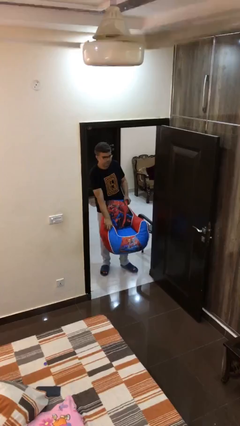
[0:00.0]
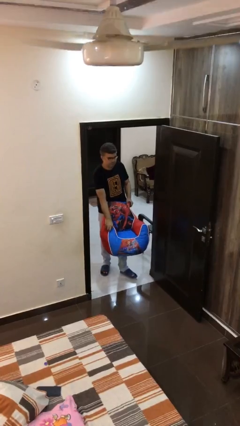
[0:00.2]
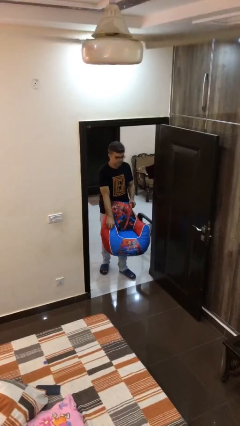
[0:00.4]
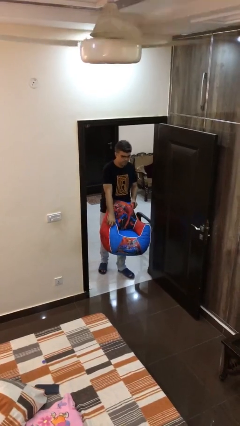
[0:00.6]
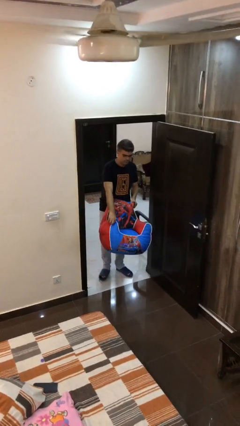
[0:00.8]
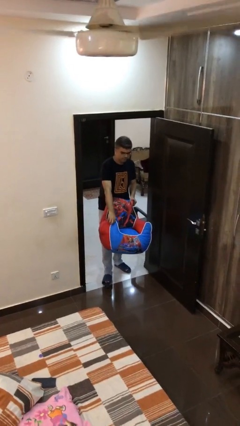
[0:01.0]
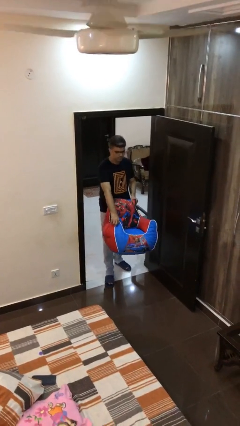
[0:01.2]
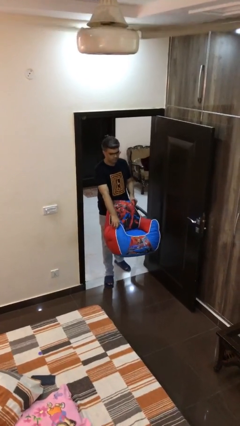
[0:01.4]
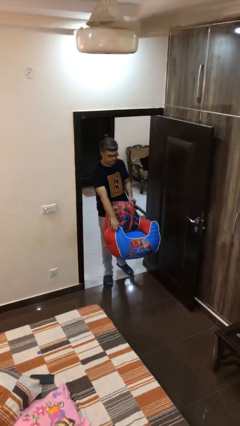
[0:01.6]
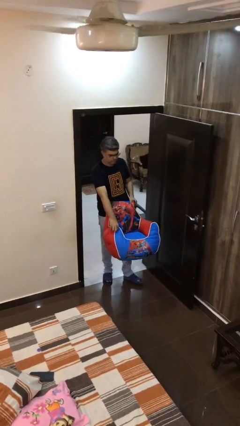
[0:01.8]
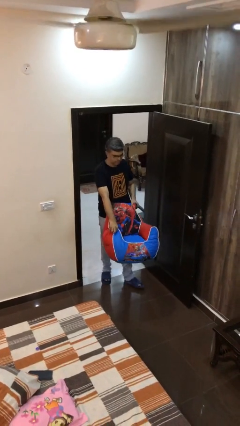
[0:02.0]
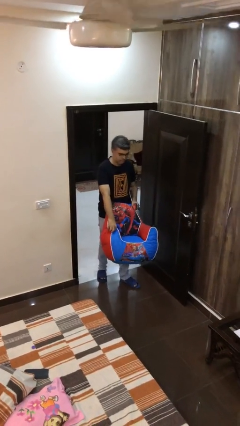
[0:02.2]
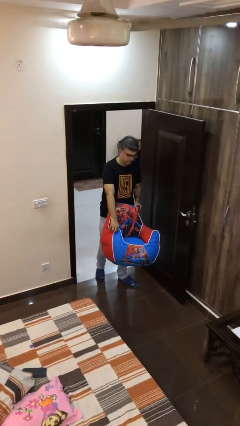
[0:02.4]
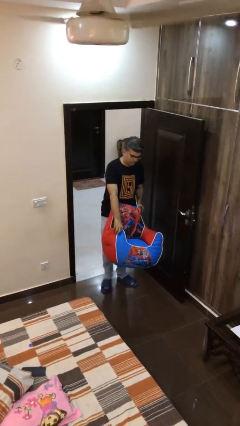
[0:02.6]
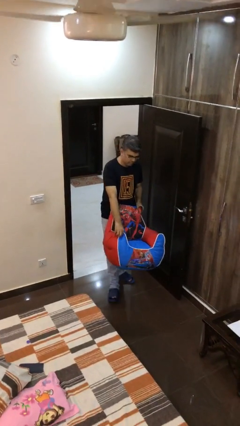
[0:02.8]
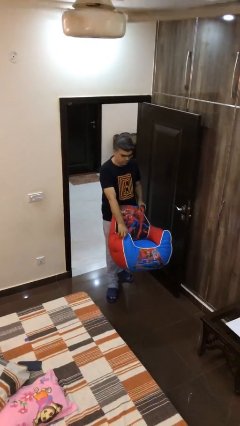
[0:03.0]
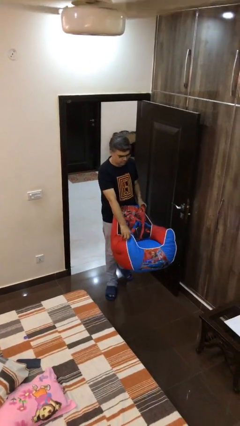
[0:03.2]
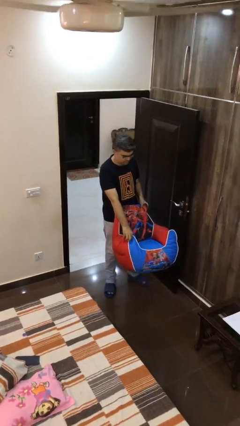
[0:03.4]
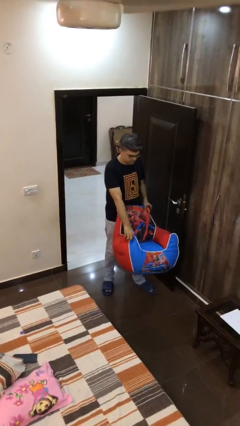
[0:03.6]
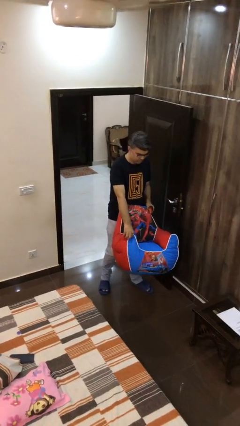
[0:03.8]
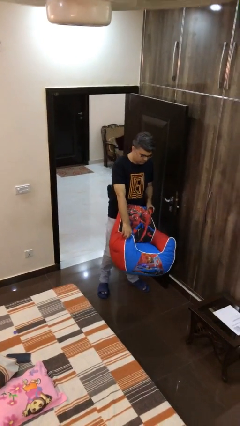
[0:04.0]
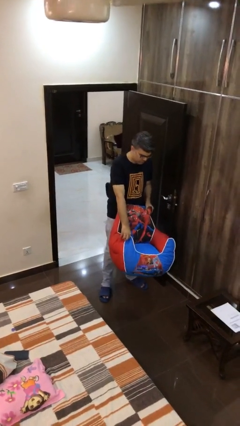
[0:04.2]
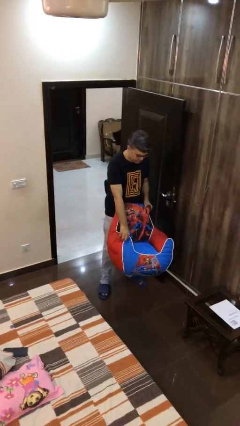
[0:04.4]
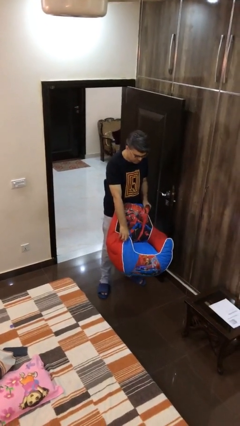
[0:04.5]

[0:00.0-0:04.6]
person carries heavy object

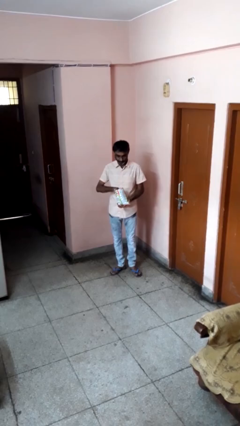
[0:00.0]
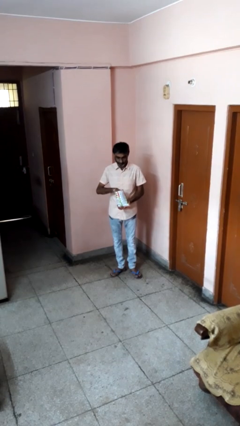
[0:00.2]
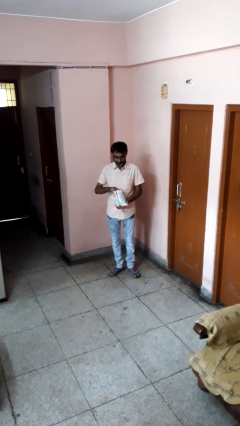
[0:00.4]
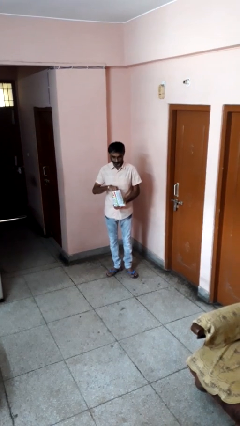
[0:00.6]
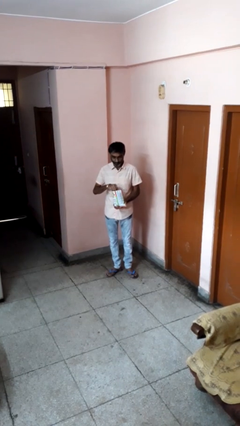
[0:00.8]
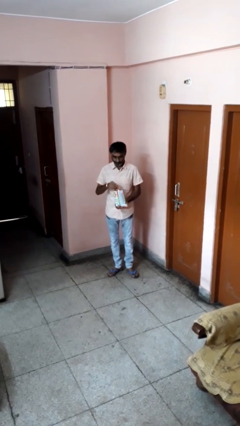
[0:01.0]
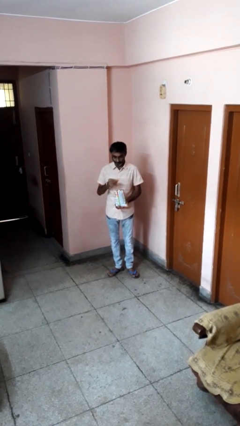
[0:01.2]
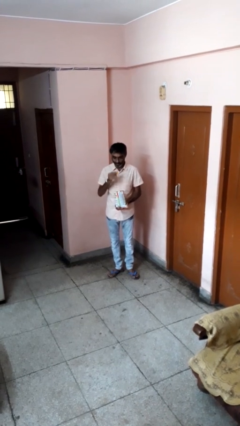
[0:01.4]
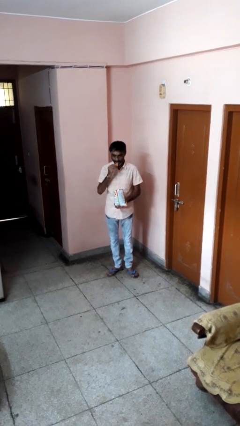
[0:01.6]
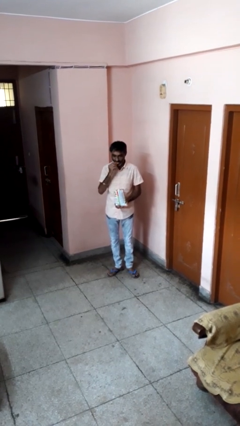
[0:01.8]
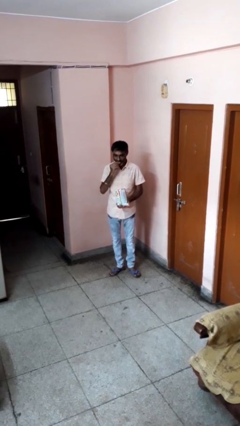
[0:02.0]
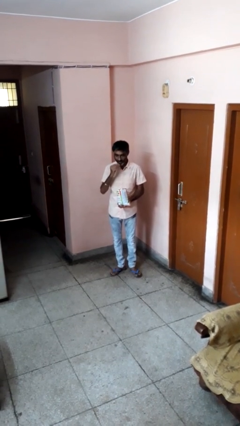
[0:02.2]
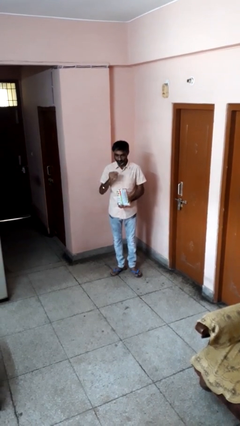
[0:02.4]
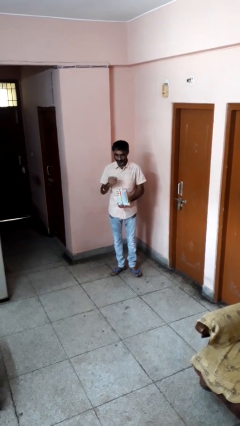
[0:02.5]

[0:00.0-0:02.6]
person eats snack from bag

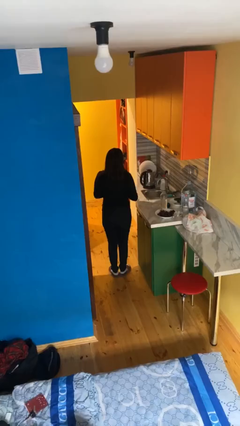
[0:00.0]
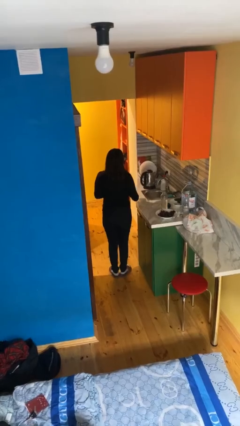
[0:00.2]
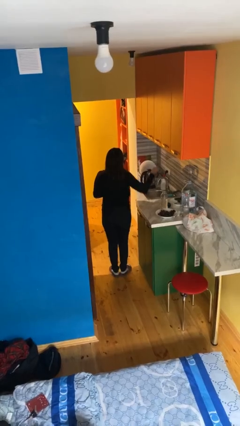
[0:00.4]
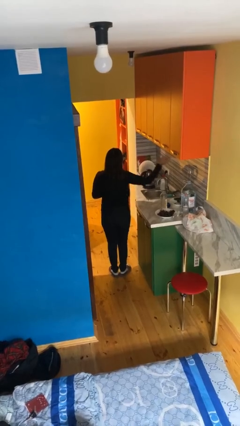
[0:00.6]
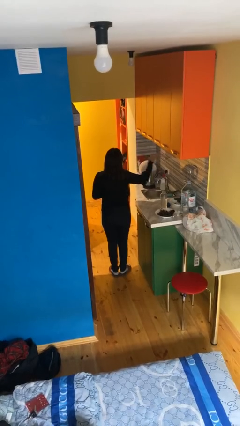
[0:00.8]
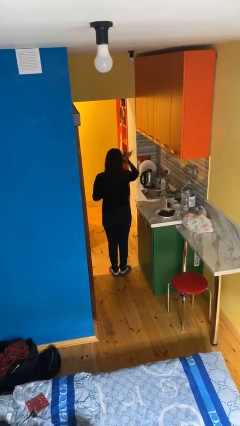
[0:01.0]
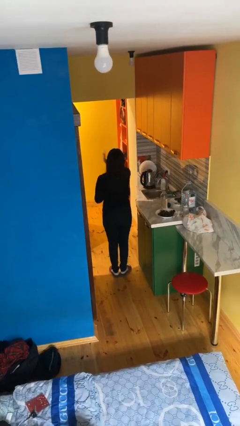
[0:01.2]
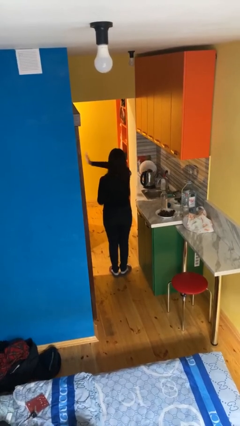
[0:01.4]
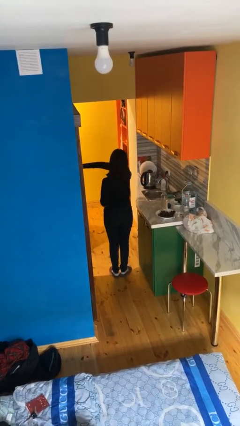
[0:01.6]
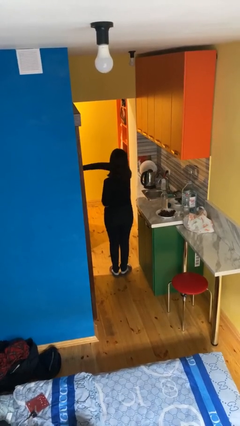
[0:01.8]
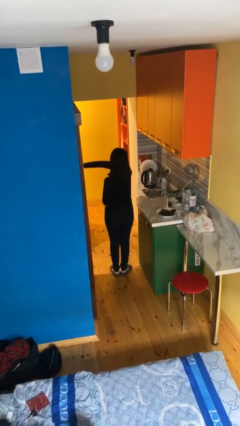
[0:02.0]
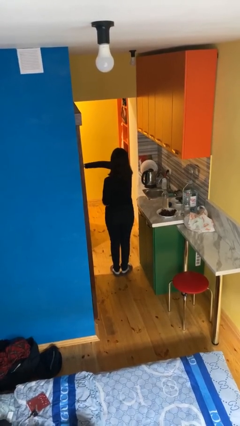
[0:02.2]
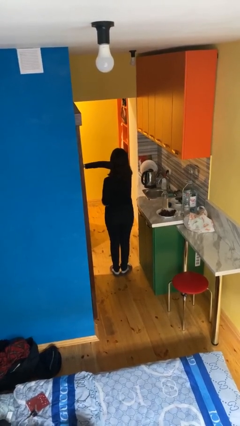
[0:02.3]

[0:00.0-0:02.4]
person gestures swipe left

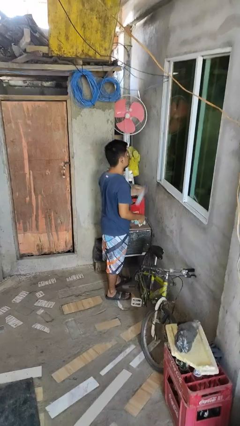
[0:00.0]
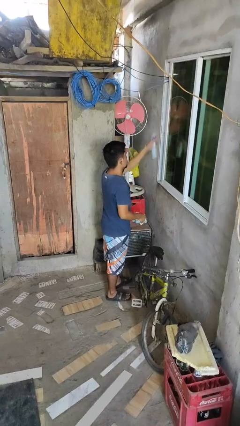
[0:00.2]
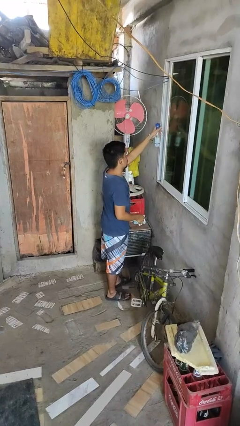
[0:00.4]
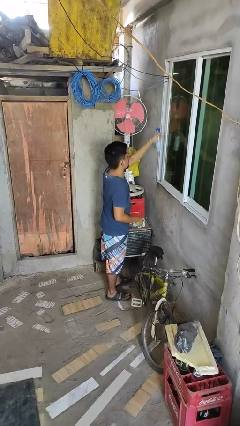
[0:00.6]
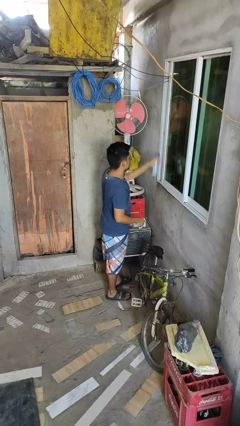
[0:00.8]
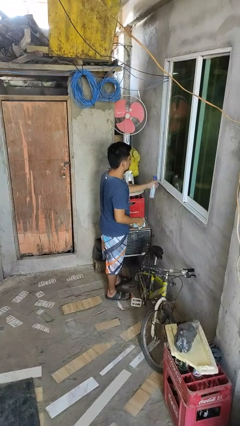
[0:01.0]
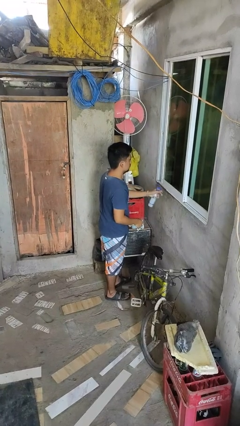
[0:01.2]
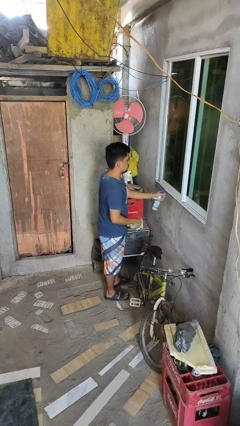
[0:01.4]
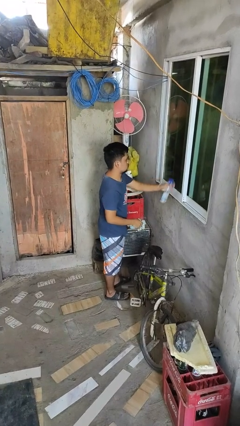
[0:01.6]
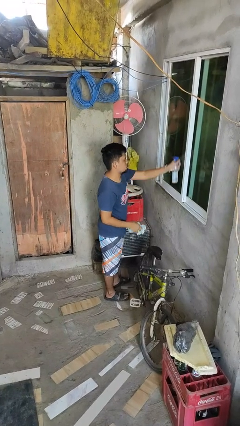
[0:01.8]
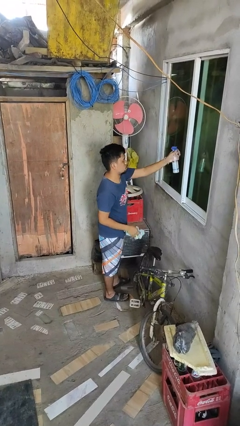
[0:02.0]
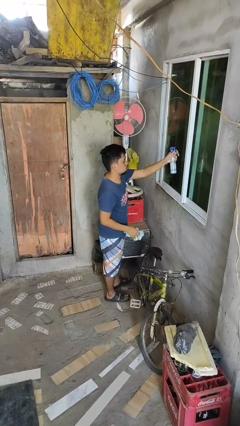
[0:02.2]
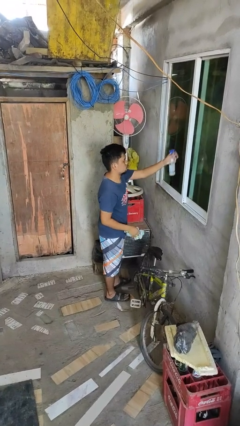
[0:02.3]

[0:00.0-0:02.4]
person sprays from bottle

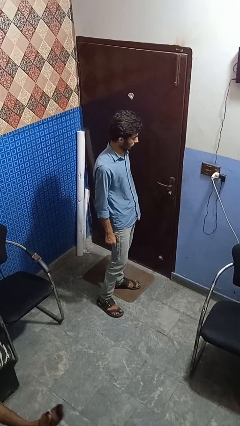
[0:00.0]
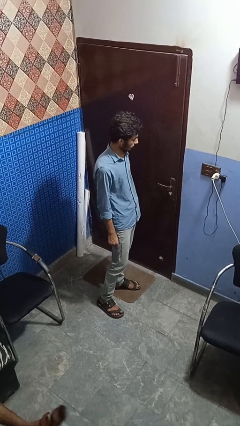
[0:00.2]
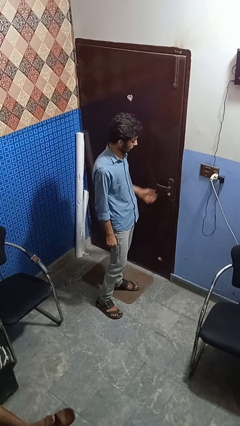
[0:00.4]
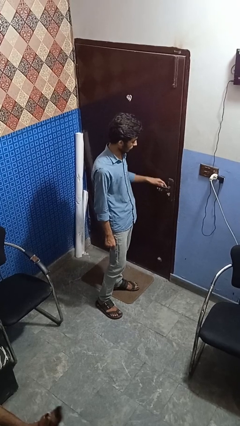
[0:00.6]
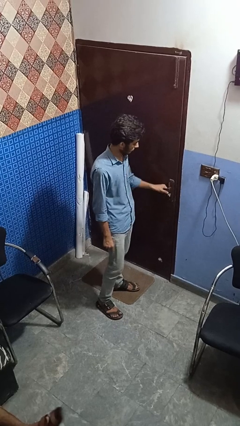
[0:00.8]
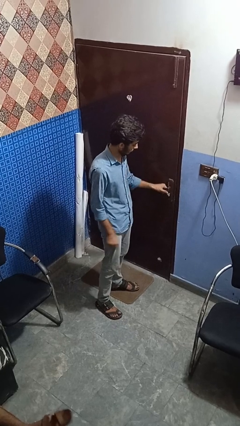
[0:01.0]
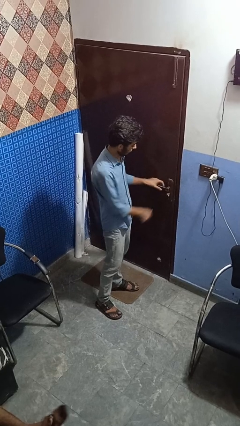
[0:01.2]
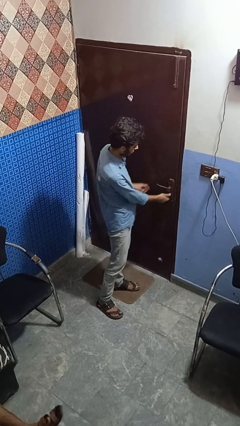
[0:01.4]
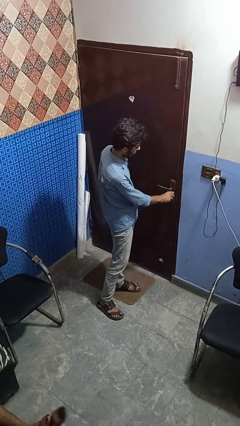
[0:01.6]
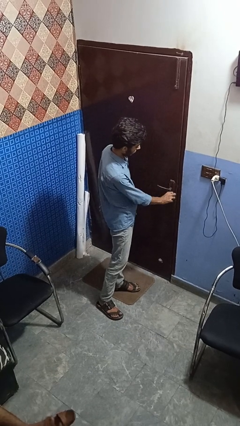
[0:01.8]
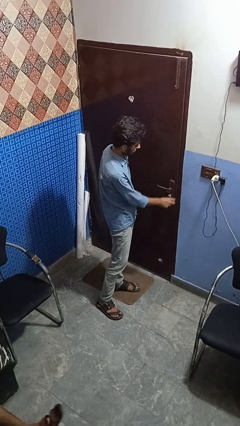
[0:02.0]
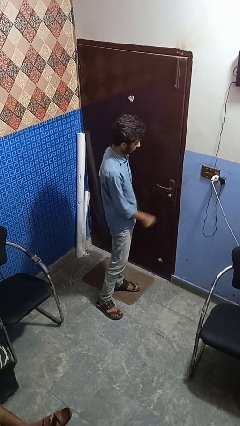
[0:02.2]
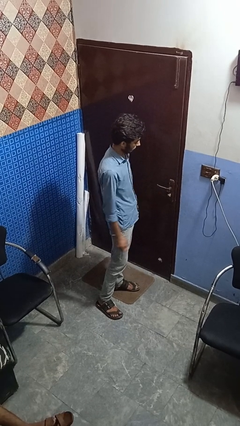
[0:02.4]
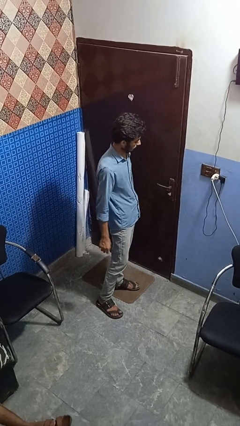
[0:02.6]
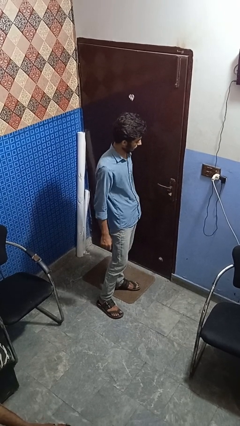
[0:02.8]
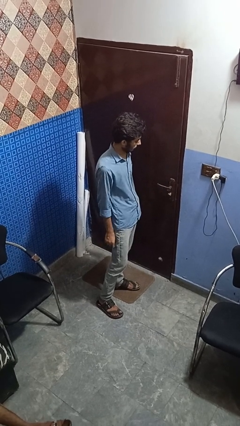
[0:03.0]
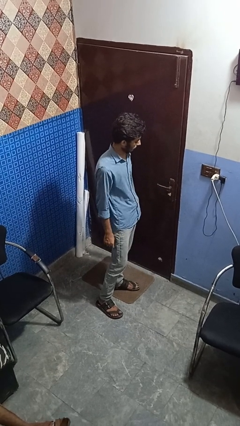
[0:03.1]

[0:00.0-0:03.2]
person unlocks door with keys

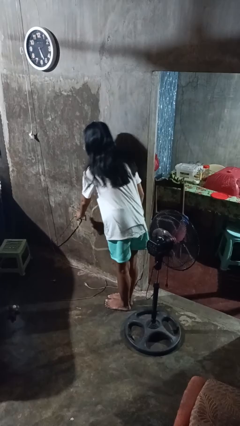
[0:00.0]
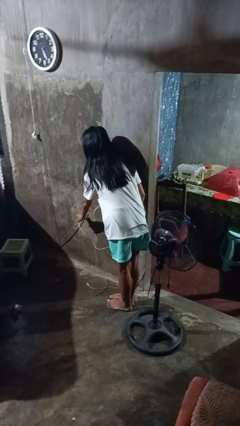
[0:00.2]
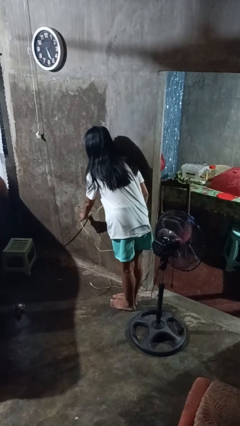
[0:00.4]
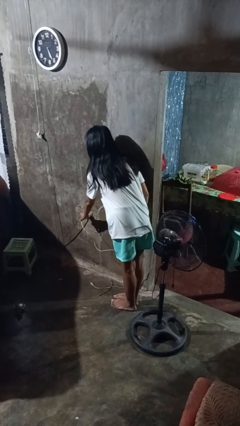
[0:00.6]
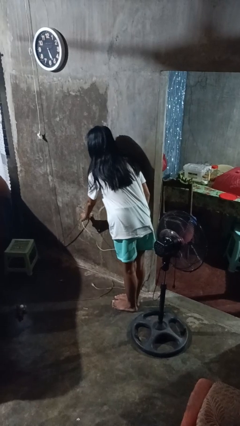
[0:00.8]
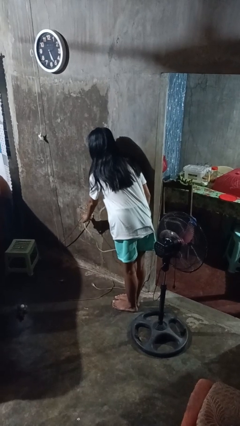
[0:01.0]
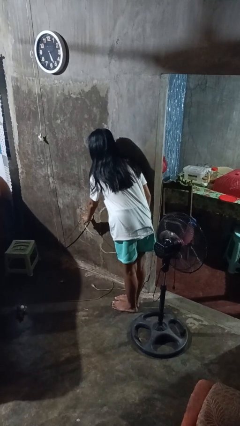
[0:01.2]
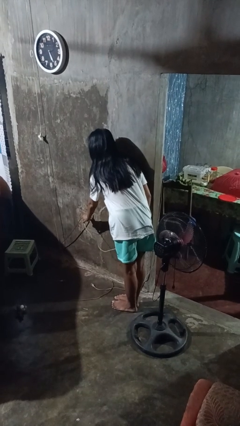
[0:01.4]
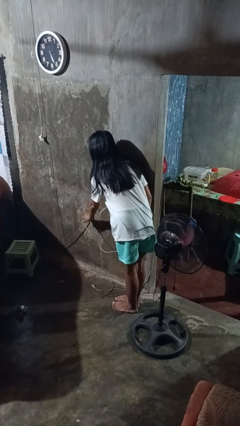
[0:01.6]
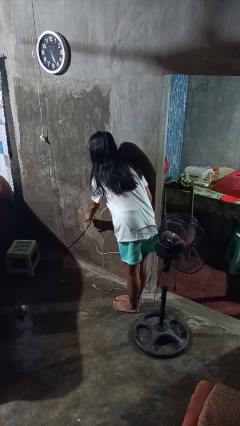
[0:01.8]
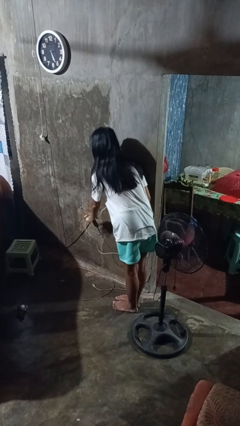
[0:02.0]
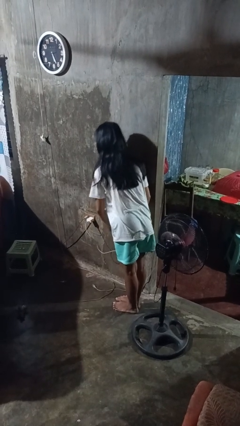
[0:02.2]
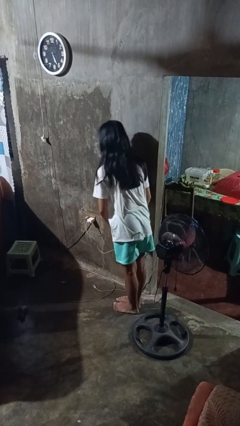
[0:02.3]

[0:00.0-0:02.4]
person plugs into electrical socket
